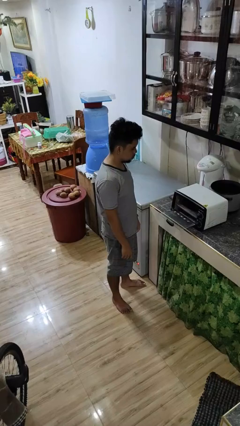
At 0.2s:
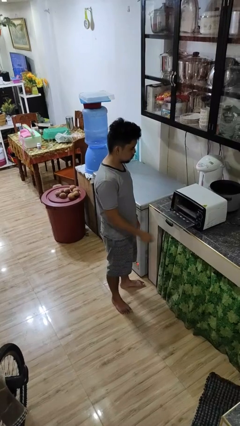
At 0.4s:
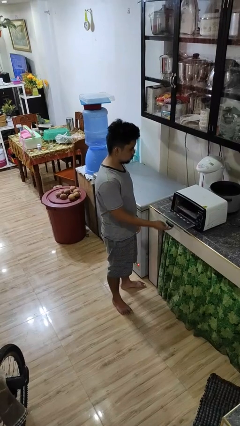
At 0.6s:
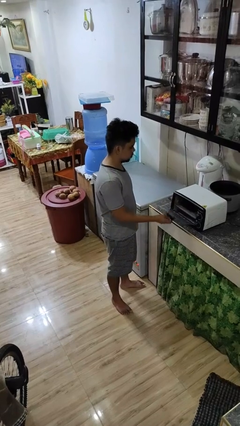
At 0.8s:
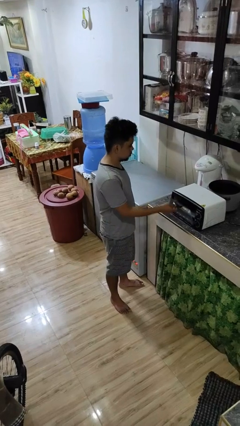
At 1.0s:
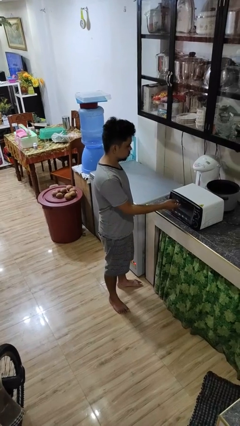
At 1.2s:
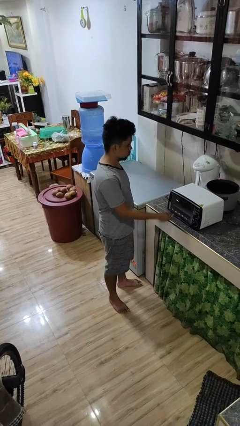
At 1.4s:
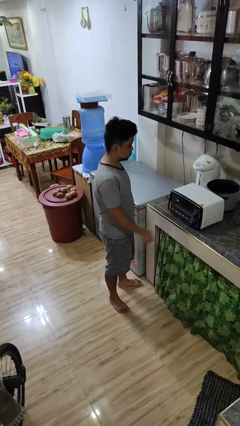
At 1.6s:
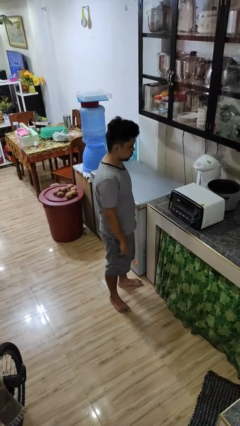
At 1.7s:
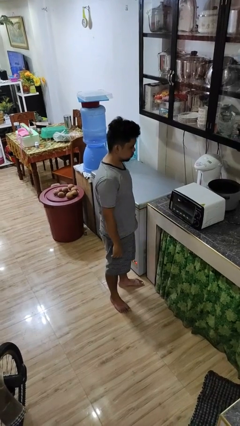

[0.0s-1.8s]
person closes microwave

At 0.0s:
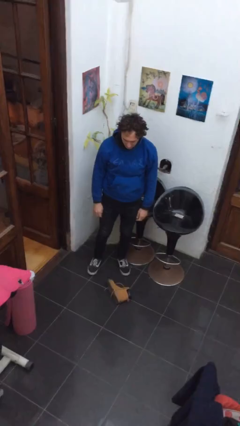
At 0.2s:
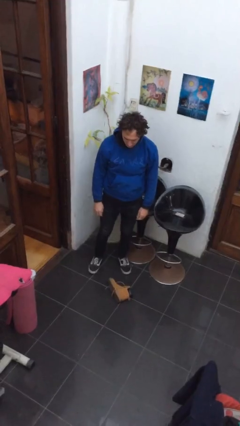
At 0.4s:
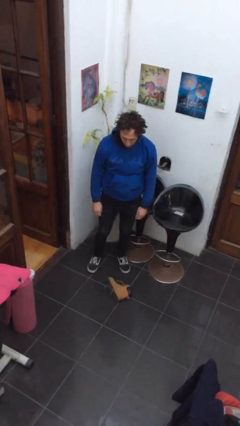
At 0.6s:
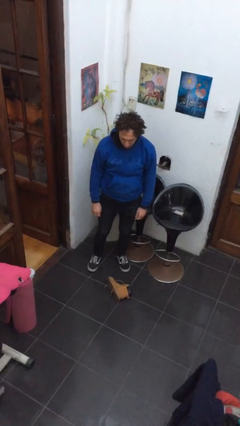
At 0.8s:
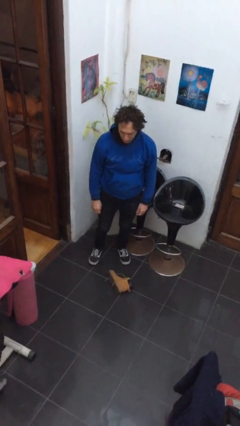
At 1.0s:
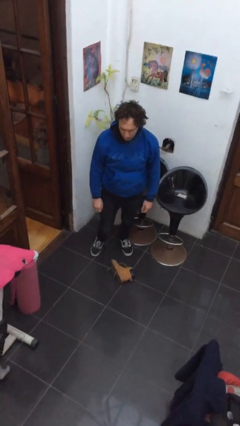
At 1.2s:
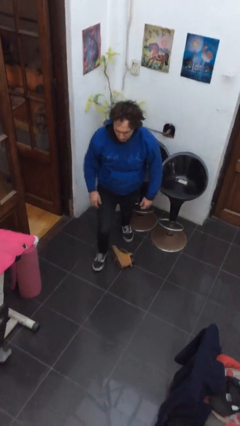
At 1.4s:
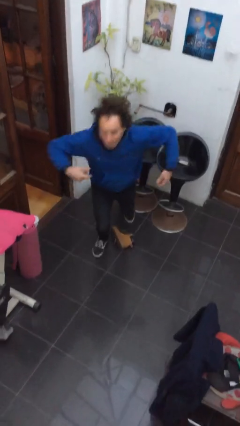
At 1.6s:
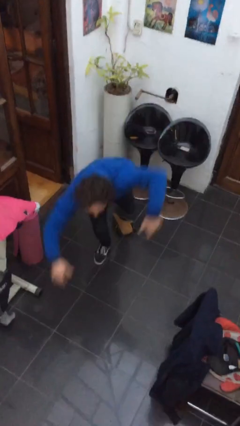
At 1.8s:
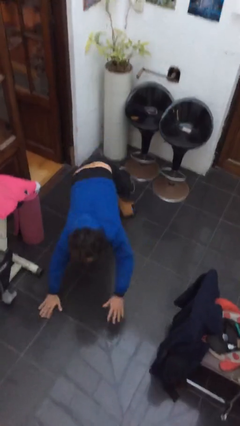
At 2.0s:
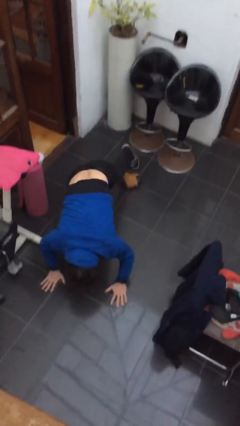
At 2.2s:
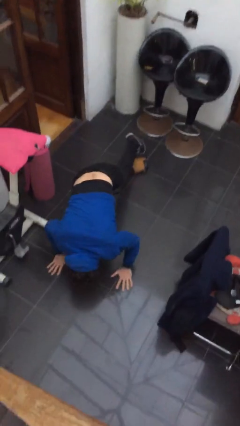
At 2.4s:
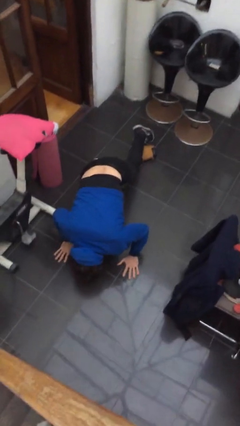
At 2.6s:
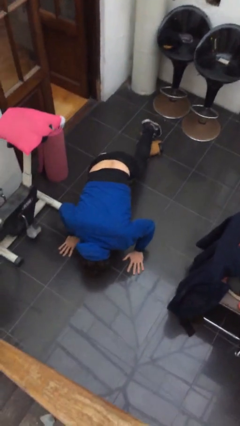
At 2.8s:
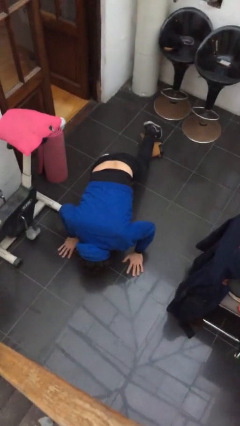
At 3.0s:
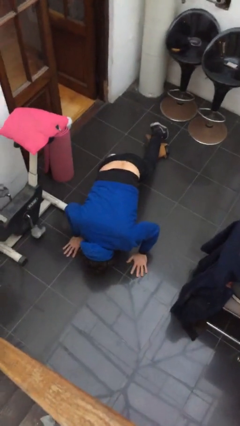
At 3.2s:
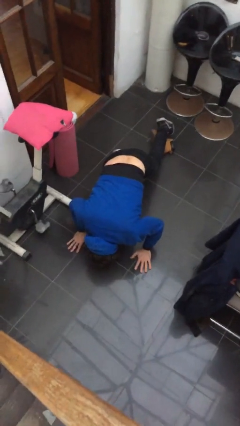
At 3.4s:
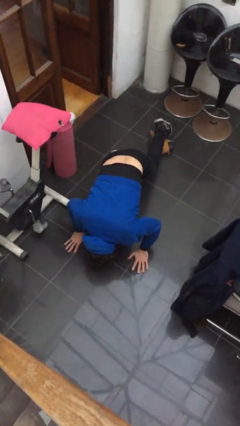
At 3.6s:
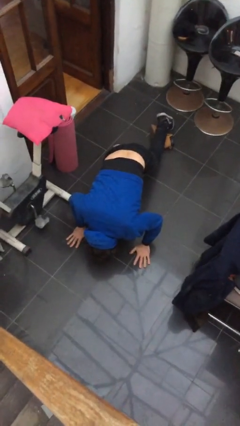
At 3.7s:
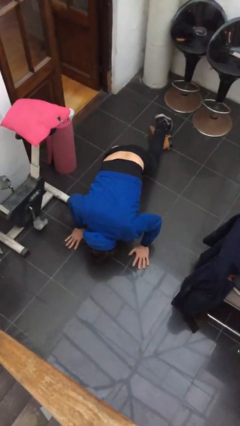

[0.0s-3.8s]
person trips on object on floor

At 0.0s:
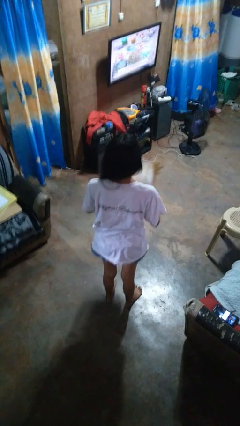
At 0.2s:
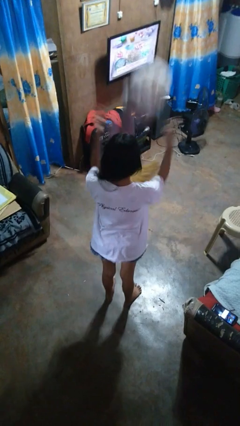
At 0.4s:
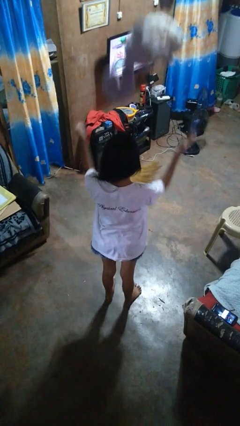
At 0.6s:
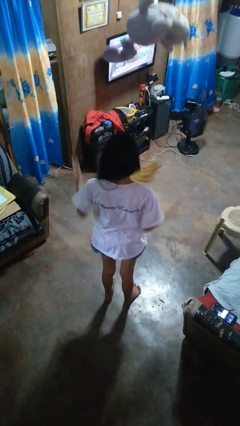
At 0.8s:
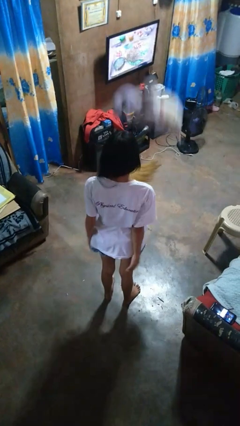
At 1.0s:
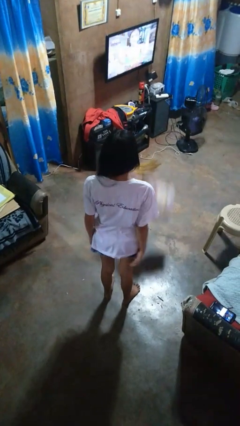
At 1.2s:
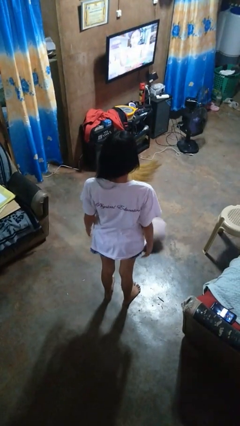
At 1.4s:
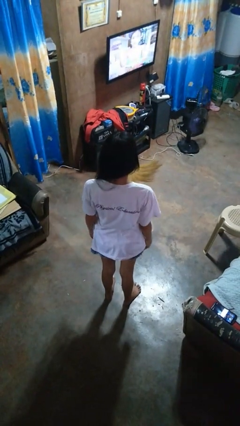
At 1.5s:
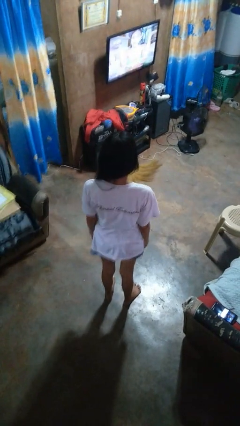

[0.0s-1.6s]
person throws object into air

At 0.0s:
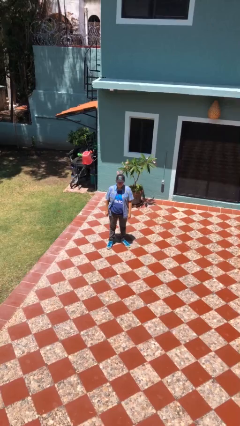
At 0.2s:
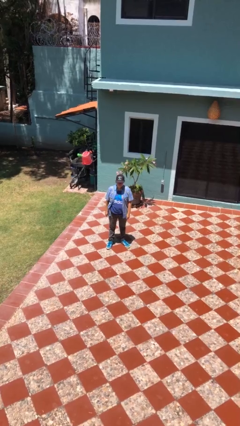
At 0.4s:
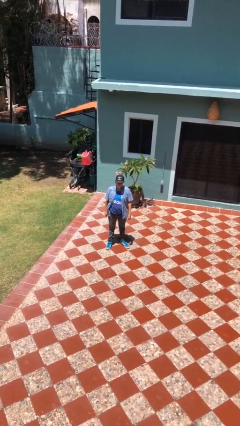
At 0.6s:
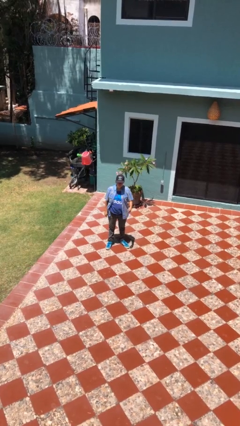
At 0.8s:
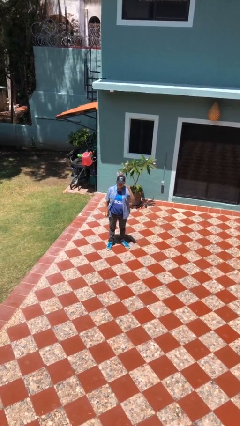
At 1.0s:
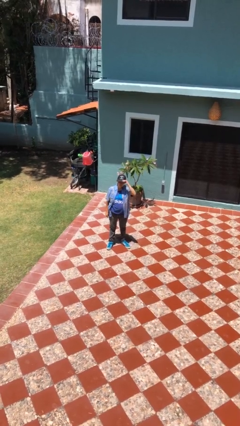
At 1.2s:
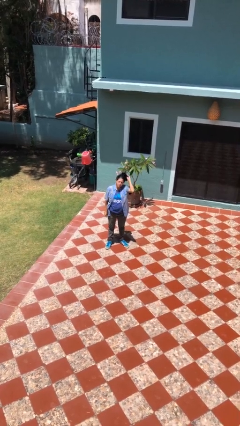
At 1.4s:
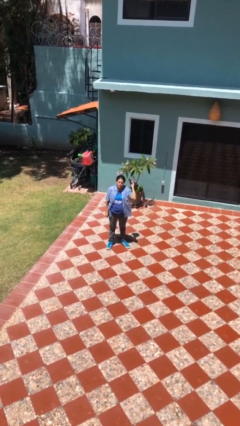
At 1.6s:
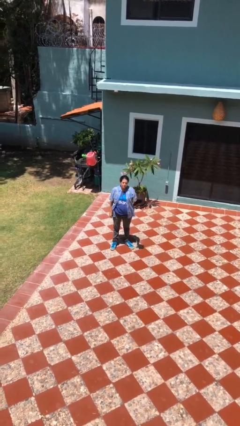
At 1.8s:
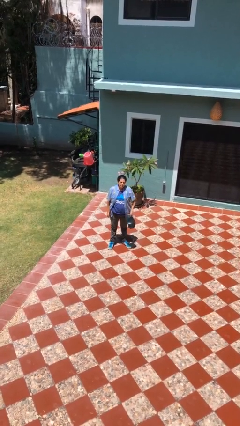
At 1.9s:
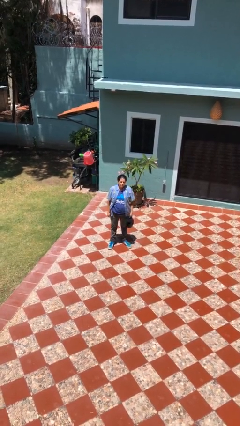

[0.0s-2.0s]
person takes off hat

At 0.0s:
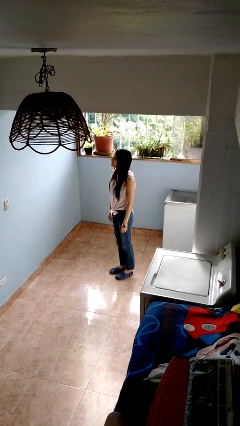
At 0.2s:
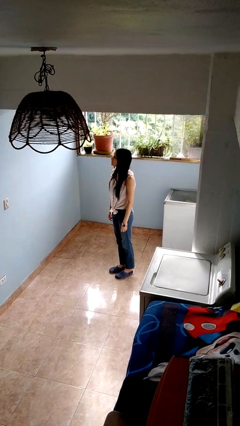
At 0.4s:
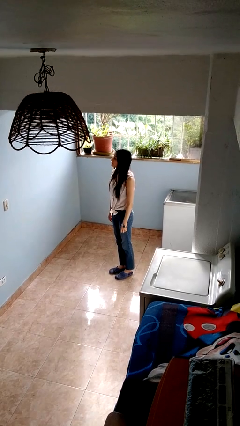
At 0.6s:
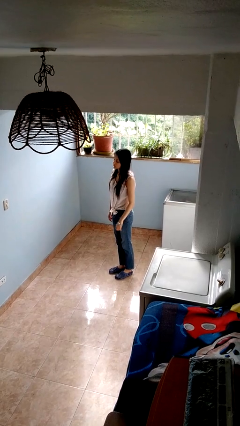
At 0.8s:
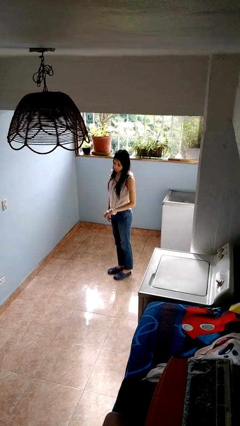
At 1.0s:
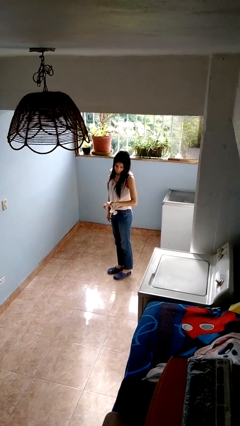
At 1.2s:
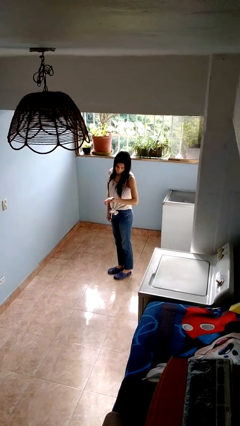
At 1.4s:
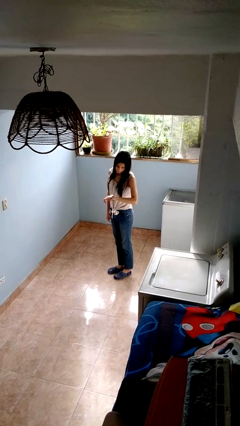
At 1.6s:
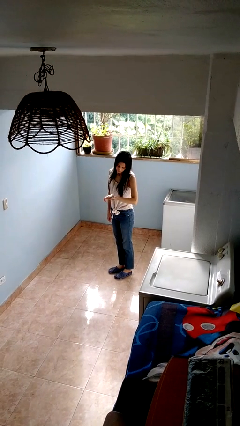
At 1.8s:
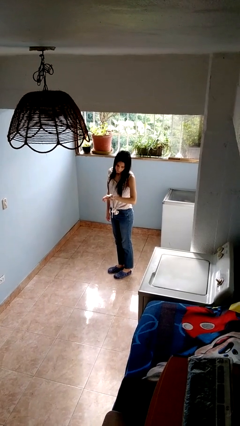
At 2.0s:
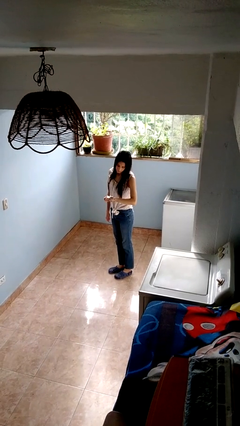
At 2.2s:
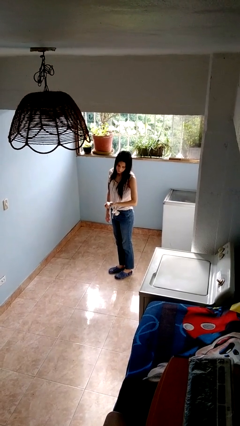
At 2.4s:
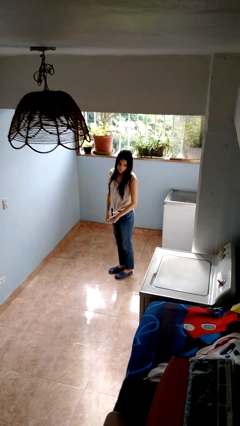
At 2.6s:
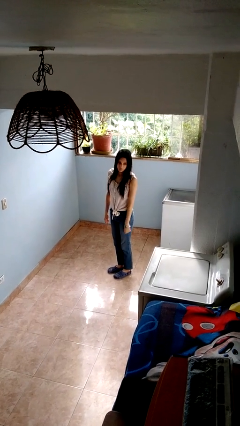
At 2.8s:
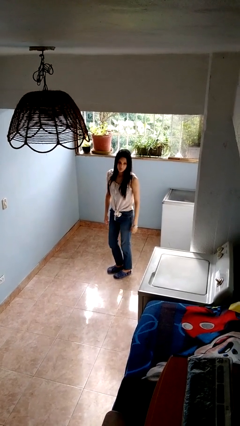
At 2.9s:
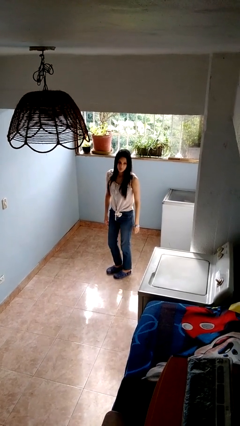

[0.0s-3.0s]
person looks at wristwatch

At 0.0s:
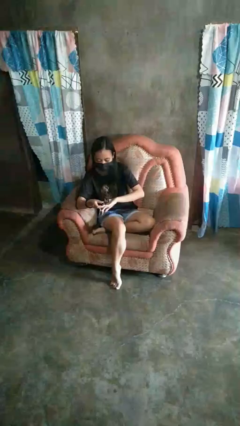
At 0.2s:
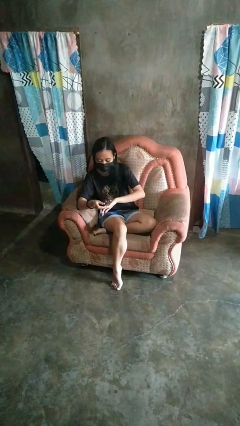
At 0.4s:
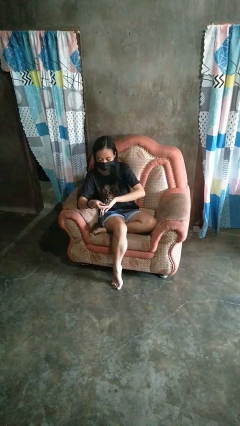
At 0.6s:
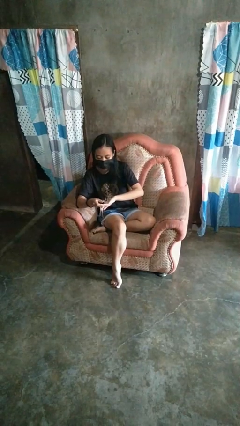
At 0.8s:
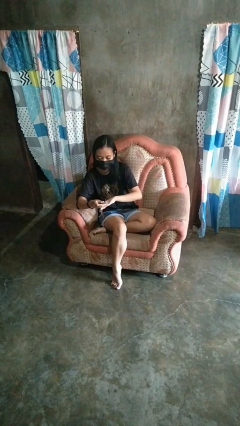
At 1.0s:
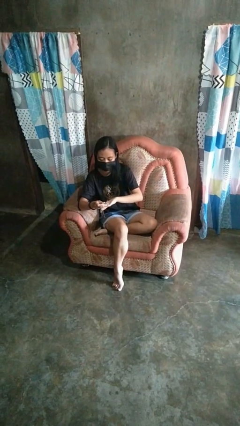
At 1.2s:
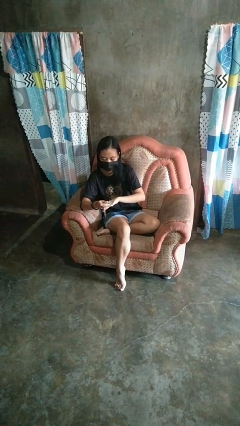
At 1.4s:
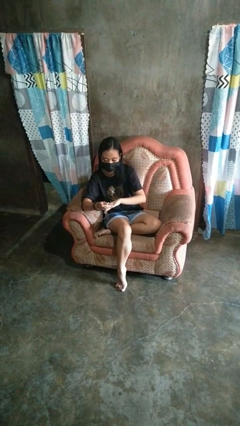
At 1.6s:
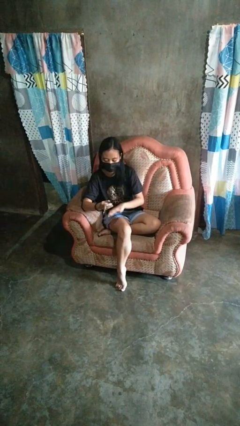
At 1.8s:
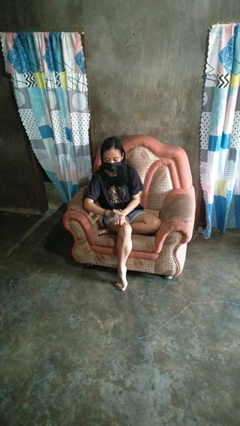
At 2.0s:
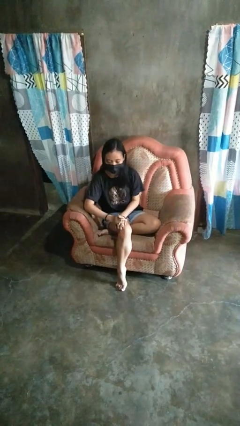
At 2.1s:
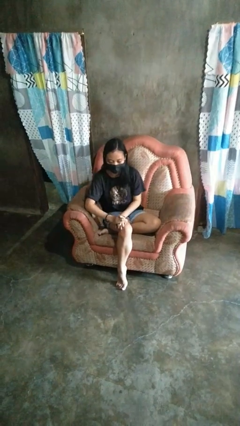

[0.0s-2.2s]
person clips fingernails

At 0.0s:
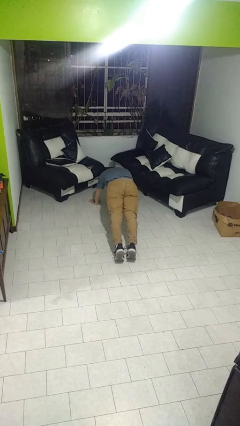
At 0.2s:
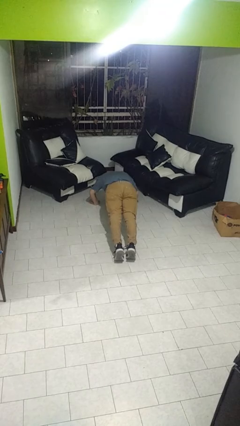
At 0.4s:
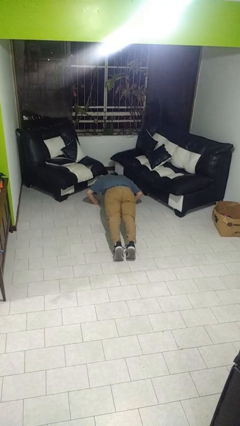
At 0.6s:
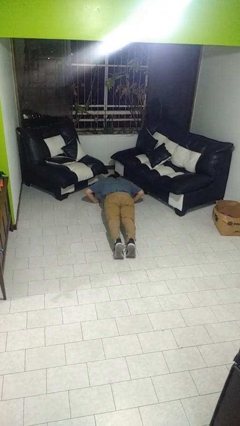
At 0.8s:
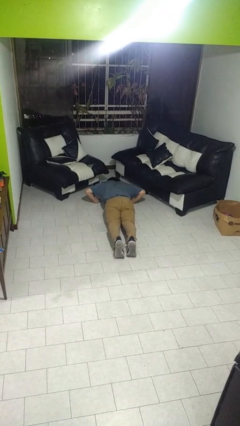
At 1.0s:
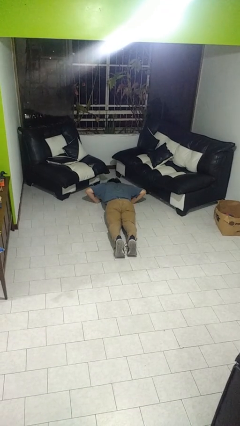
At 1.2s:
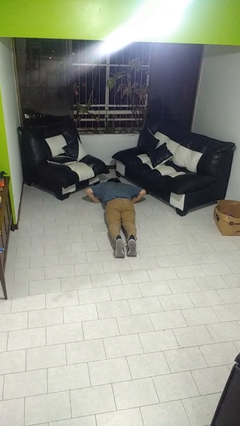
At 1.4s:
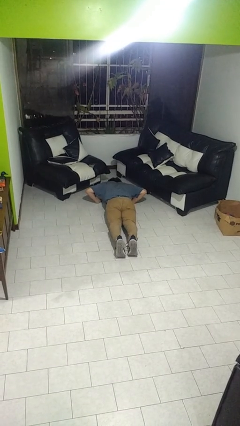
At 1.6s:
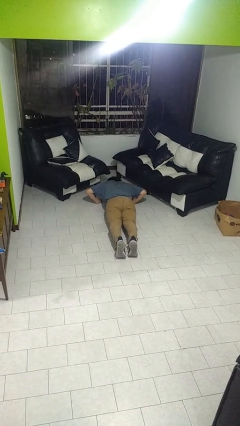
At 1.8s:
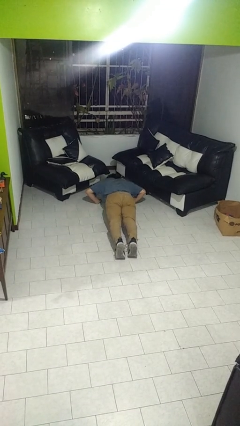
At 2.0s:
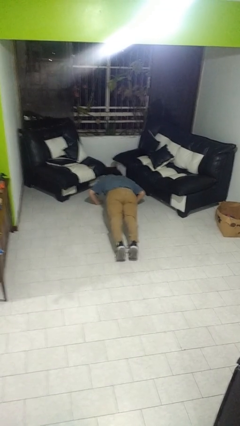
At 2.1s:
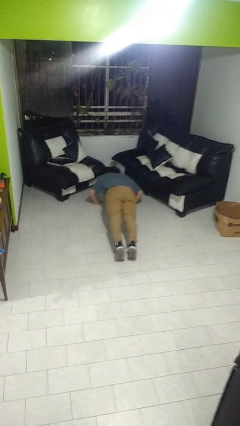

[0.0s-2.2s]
person exercises with pushup

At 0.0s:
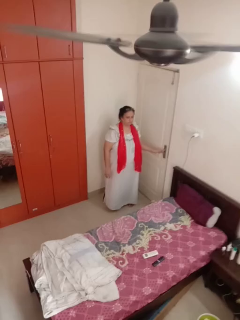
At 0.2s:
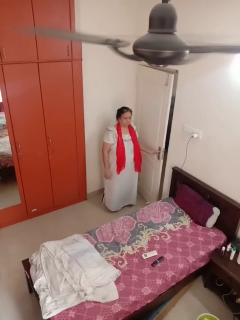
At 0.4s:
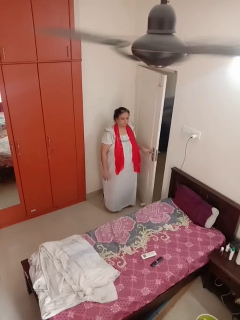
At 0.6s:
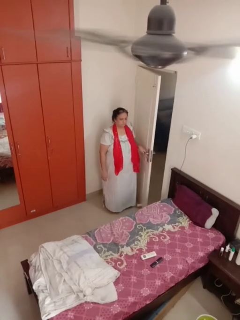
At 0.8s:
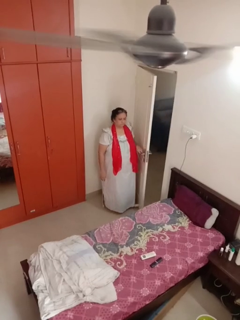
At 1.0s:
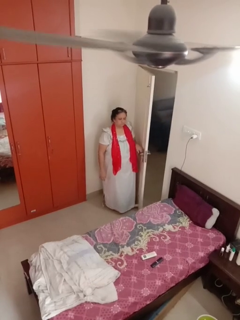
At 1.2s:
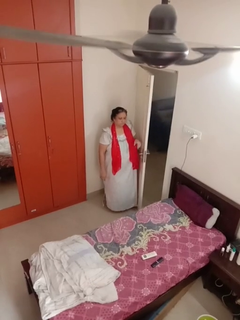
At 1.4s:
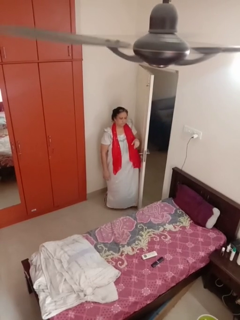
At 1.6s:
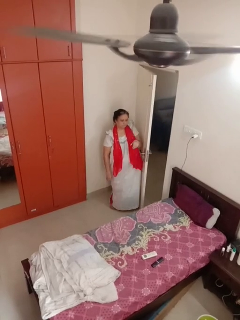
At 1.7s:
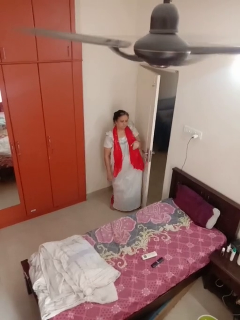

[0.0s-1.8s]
person opens facility door
